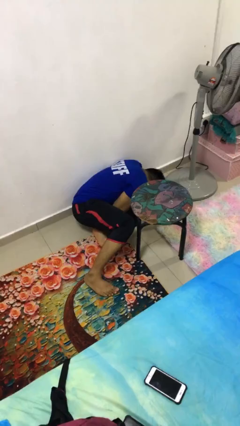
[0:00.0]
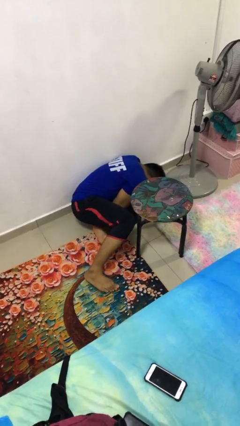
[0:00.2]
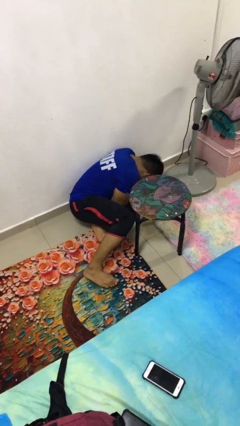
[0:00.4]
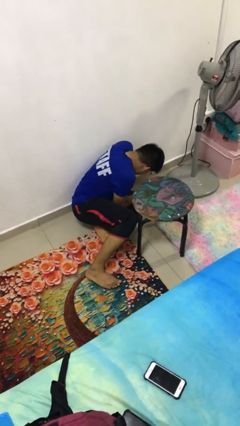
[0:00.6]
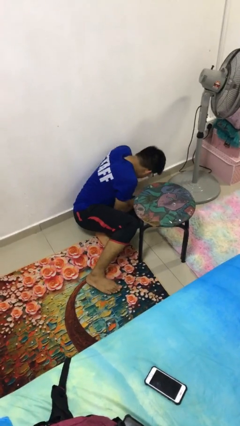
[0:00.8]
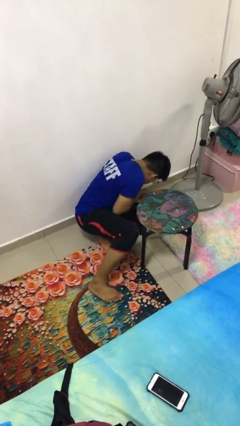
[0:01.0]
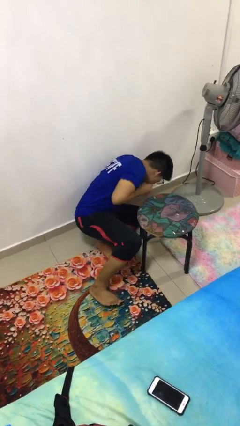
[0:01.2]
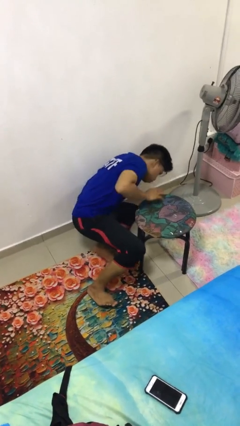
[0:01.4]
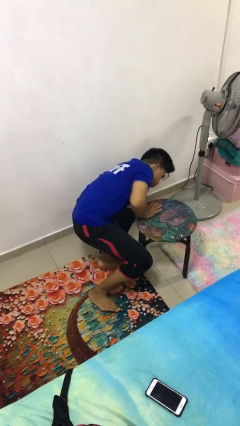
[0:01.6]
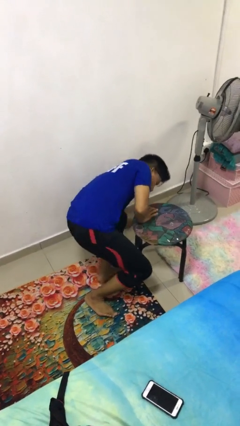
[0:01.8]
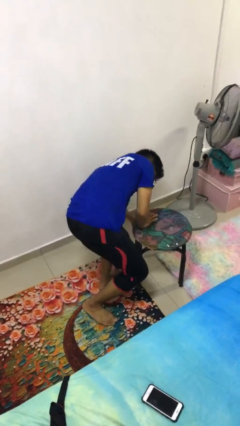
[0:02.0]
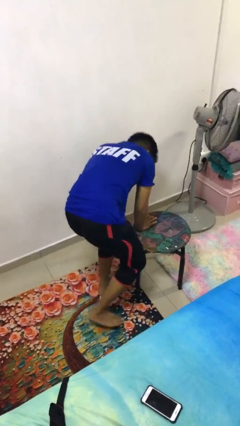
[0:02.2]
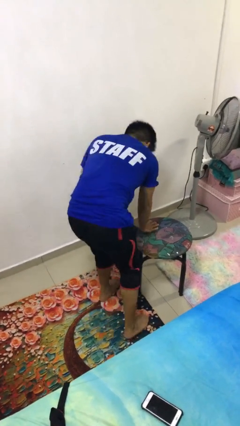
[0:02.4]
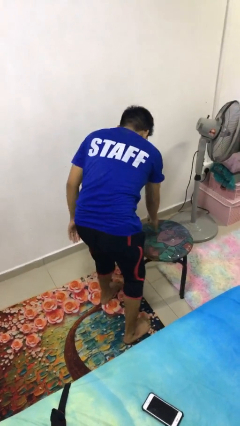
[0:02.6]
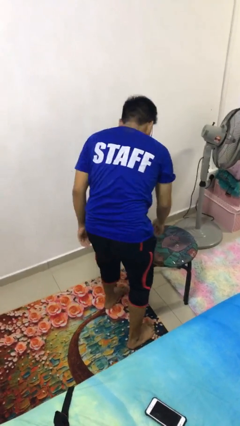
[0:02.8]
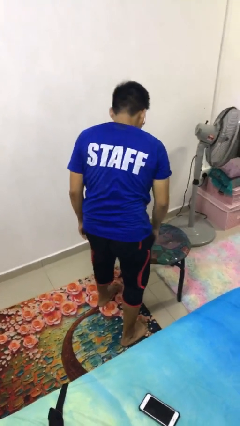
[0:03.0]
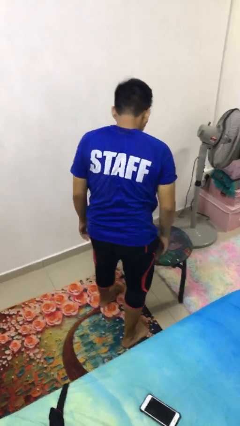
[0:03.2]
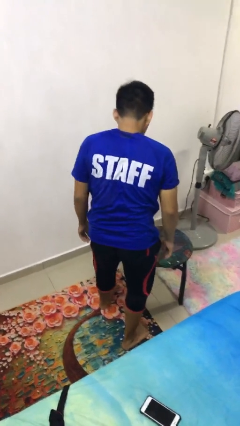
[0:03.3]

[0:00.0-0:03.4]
person stands up from floor

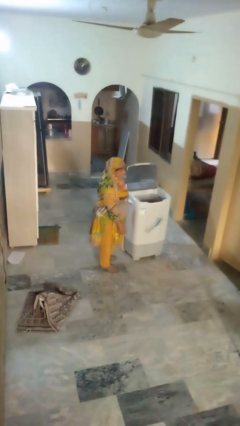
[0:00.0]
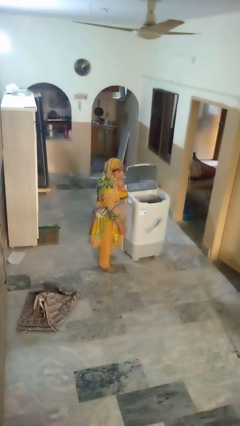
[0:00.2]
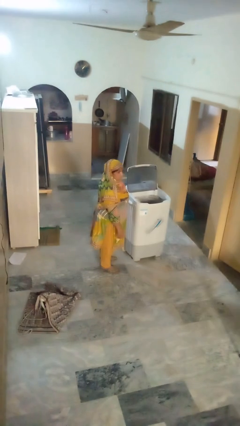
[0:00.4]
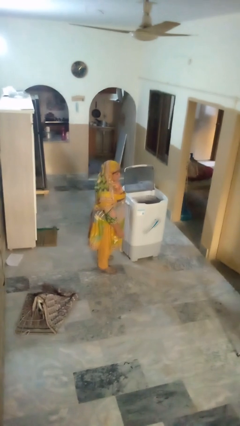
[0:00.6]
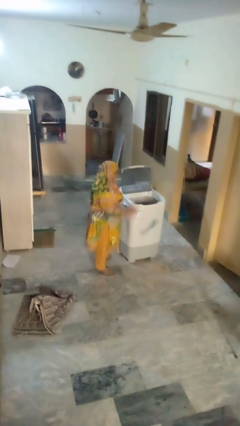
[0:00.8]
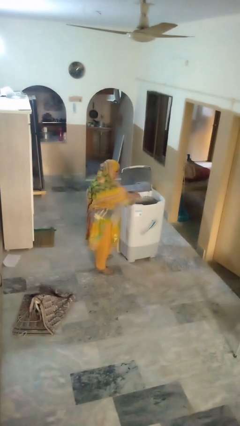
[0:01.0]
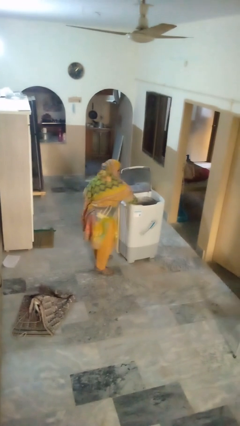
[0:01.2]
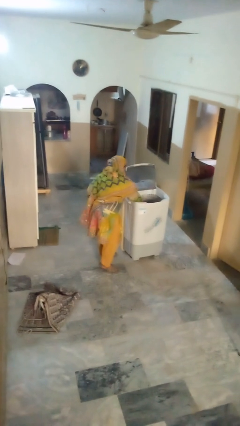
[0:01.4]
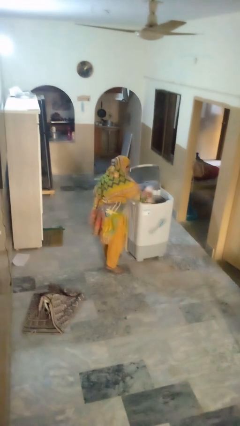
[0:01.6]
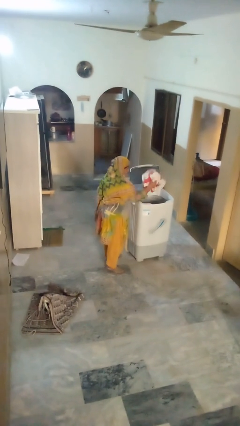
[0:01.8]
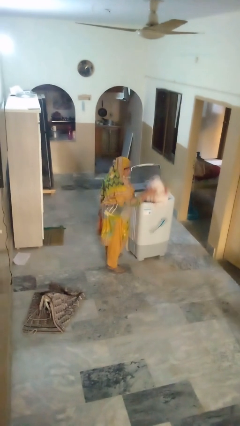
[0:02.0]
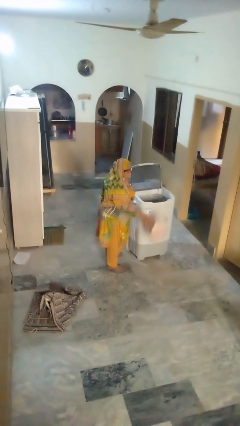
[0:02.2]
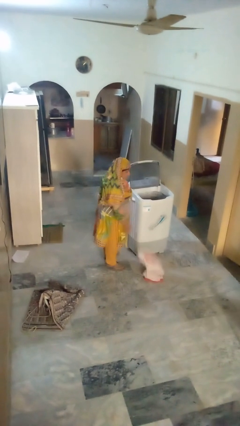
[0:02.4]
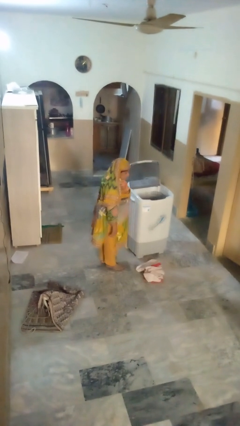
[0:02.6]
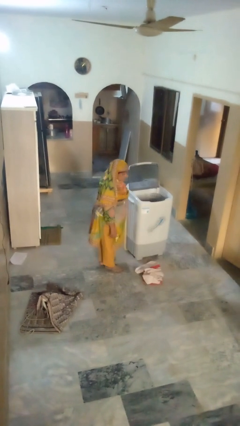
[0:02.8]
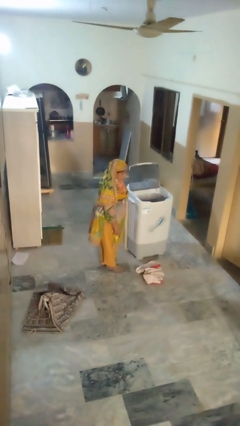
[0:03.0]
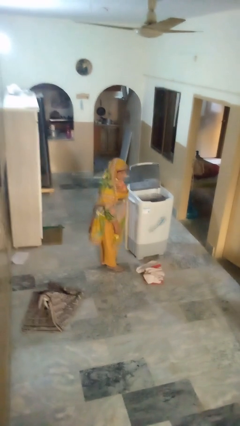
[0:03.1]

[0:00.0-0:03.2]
person unloads clotheswasher

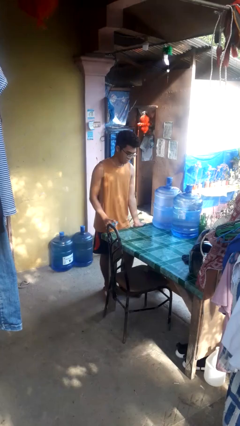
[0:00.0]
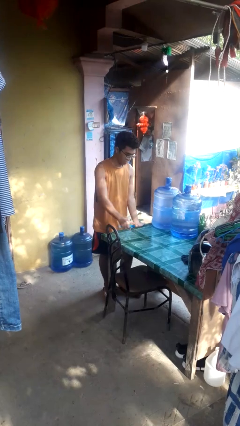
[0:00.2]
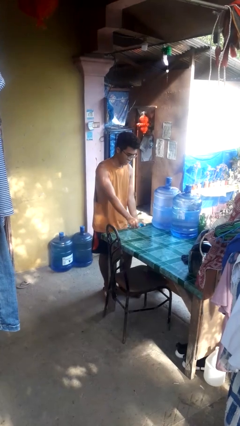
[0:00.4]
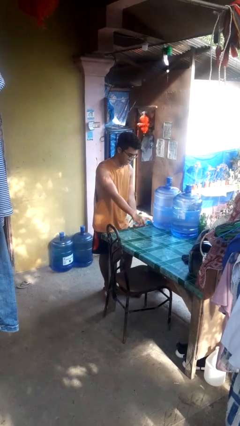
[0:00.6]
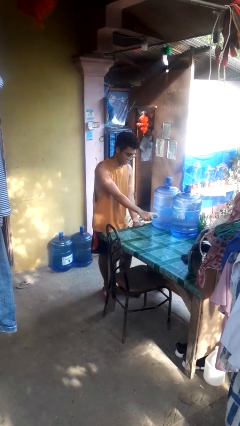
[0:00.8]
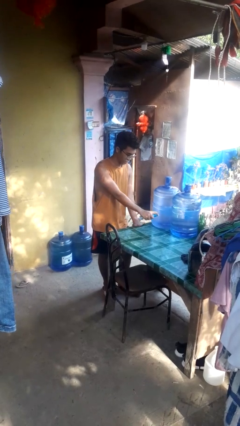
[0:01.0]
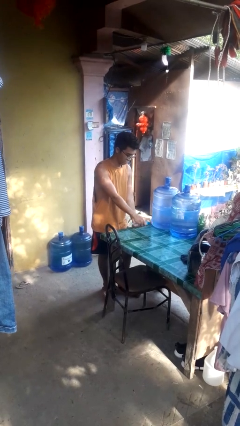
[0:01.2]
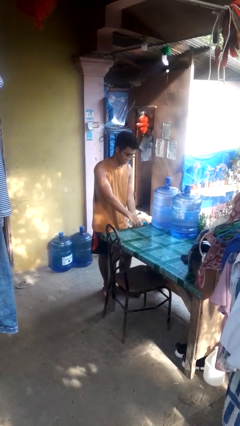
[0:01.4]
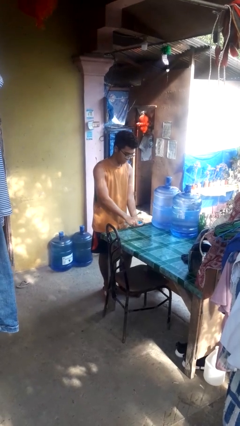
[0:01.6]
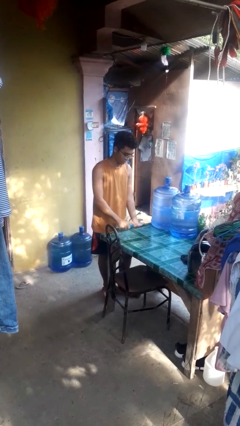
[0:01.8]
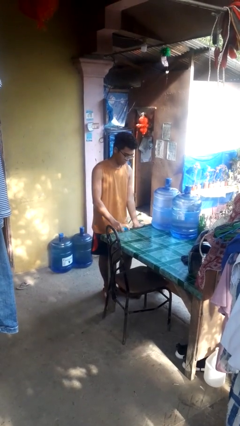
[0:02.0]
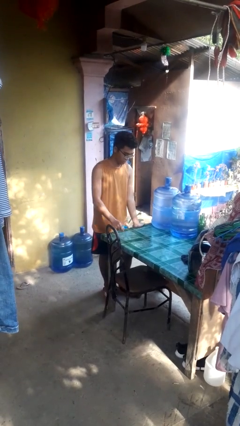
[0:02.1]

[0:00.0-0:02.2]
person sprays from bottle

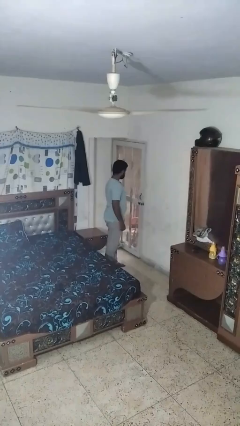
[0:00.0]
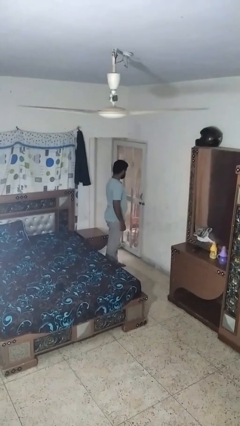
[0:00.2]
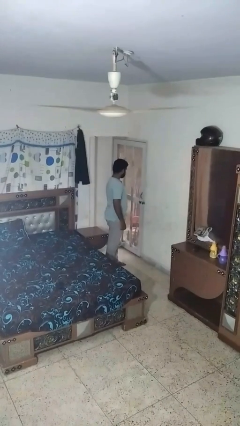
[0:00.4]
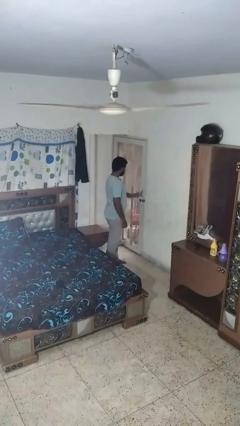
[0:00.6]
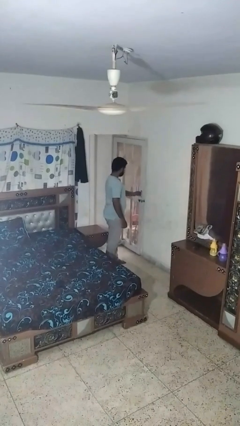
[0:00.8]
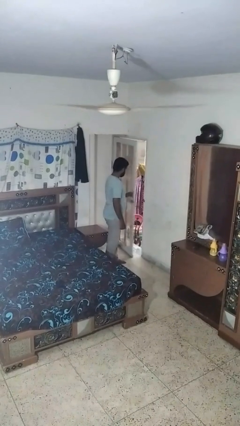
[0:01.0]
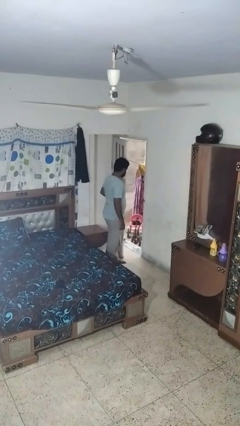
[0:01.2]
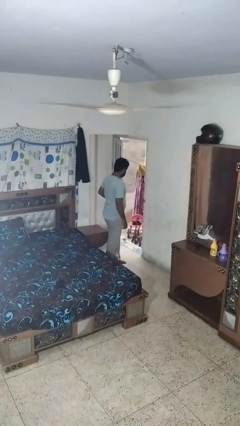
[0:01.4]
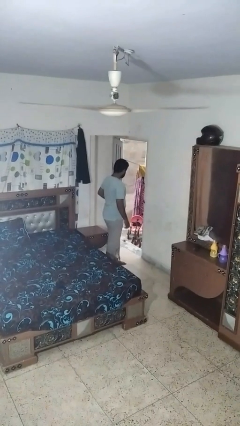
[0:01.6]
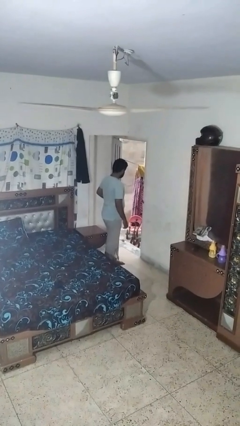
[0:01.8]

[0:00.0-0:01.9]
person opens facility door

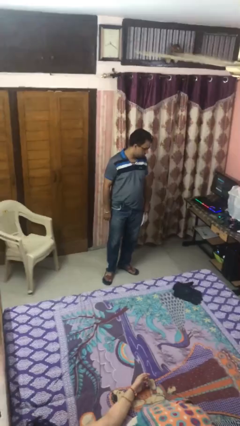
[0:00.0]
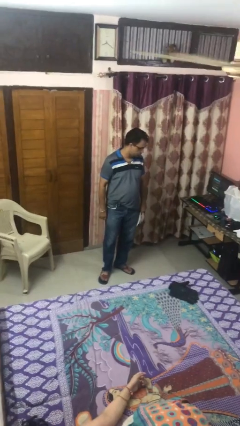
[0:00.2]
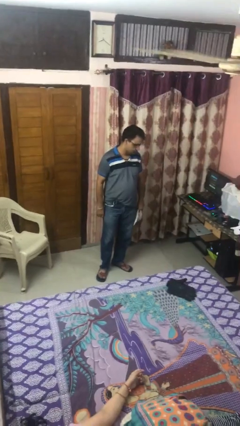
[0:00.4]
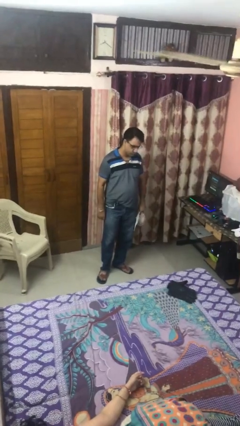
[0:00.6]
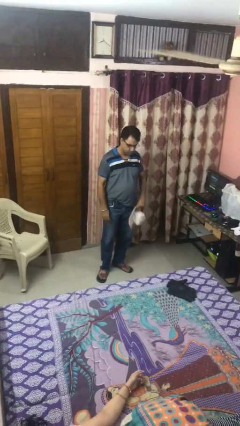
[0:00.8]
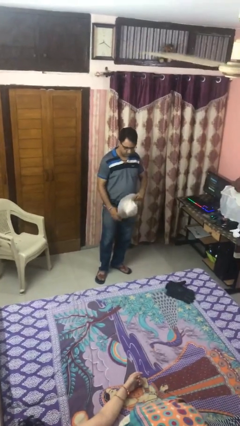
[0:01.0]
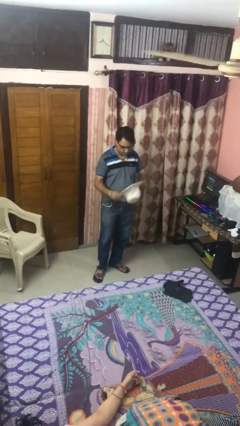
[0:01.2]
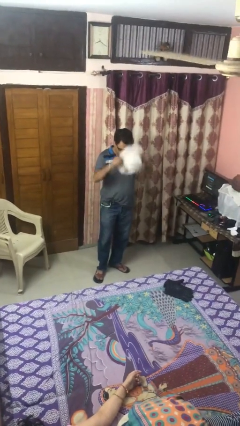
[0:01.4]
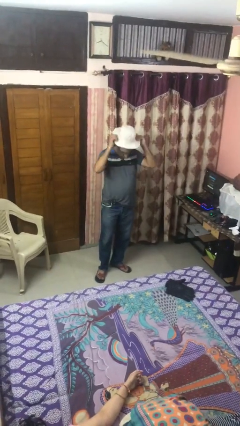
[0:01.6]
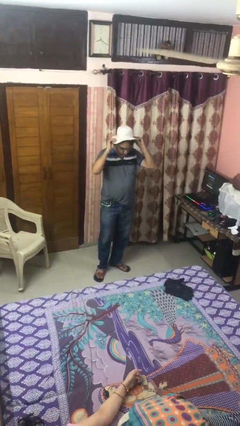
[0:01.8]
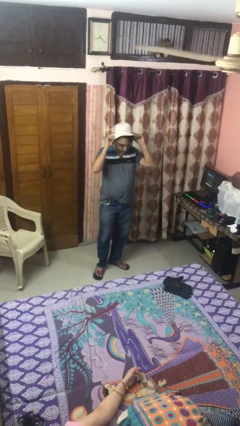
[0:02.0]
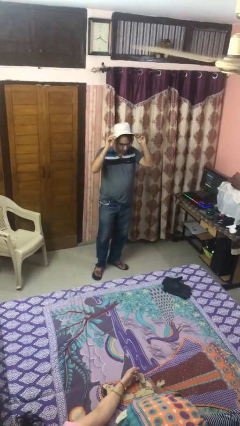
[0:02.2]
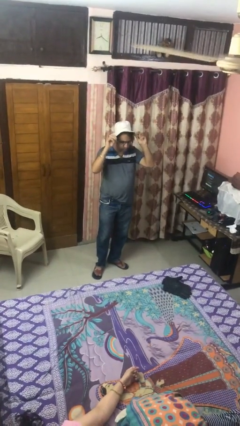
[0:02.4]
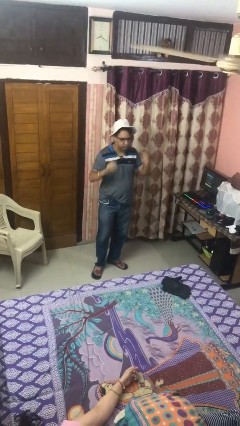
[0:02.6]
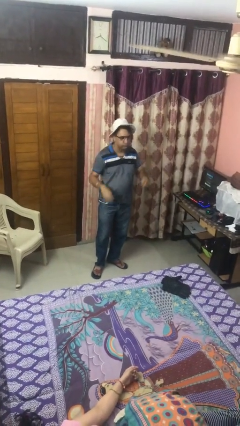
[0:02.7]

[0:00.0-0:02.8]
person puts on hat

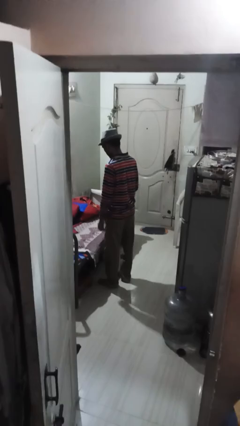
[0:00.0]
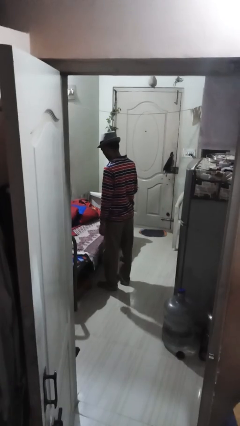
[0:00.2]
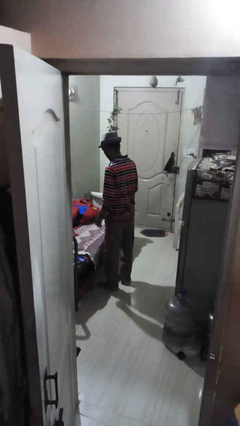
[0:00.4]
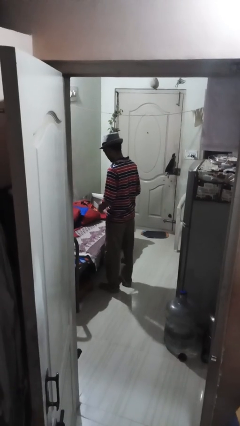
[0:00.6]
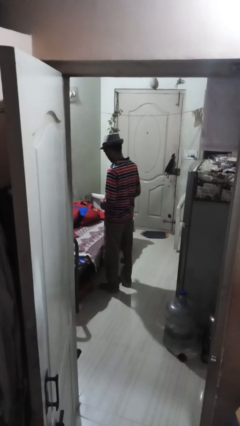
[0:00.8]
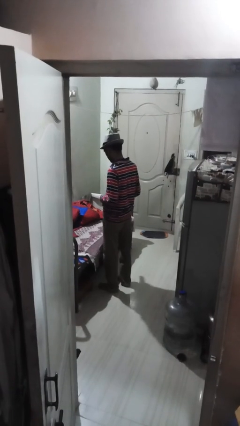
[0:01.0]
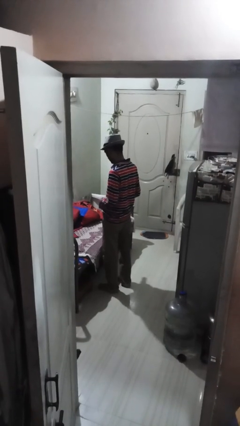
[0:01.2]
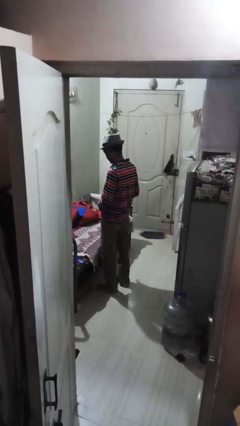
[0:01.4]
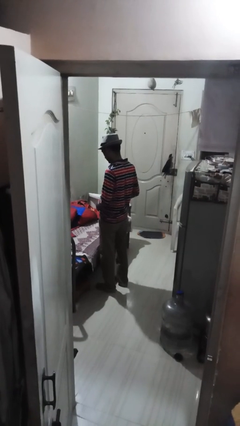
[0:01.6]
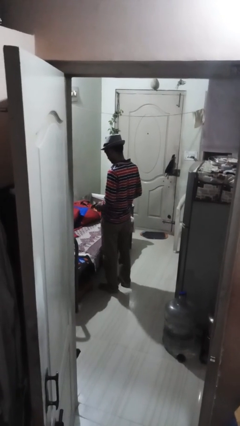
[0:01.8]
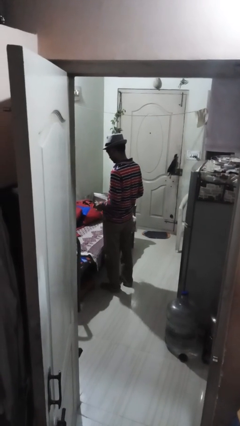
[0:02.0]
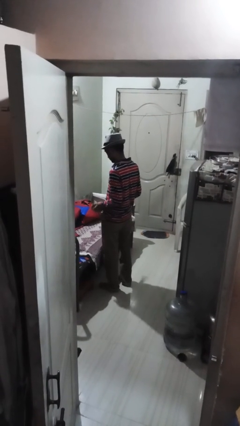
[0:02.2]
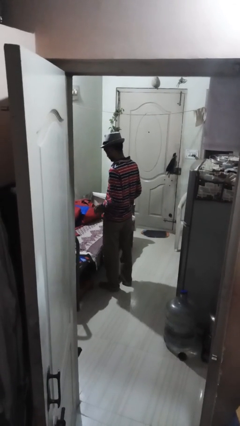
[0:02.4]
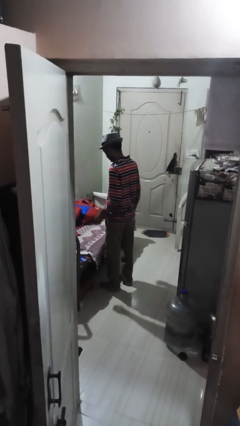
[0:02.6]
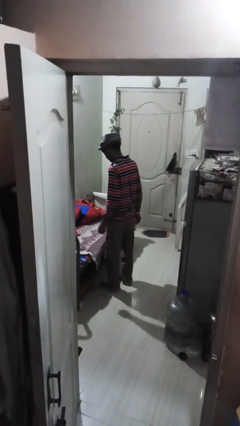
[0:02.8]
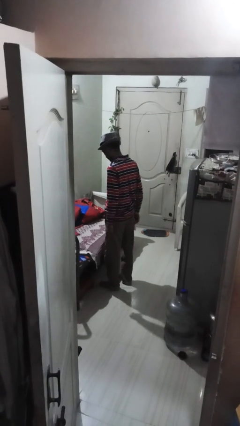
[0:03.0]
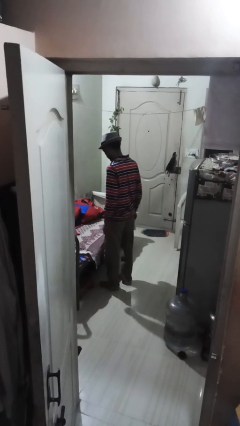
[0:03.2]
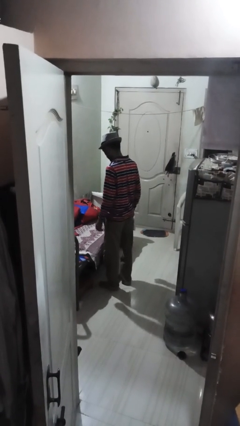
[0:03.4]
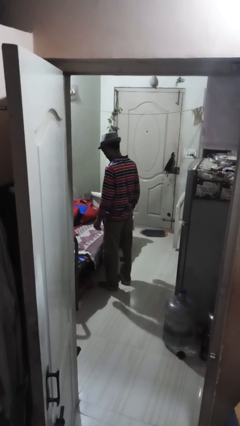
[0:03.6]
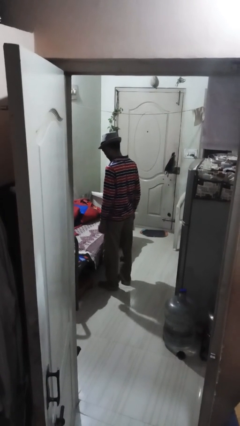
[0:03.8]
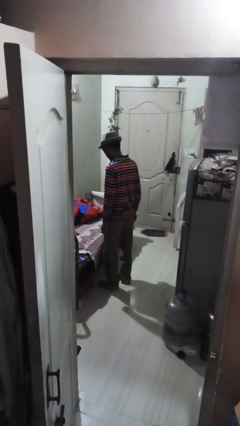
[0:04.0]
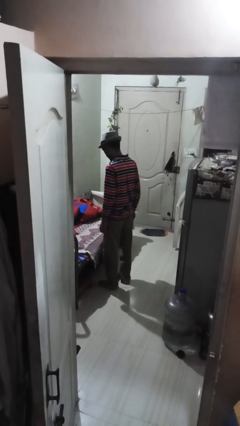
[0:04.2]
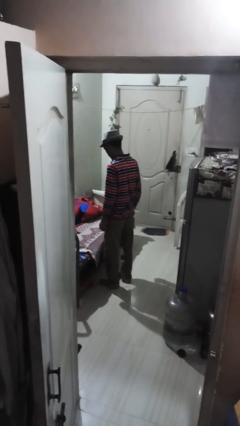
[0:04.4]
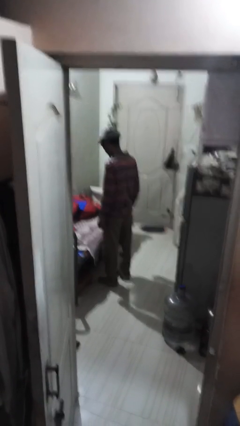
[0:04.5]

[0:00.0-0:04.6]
person takes off belt
